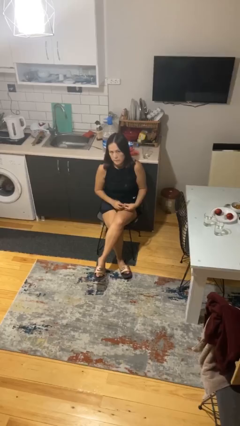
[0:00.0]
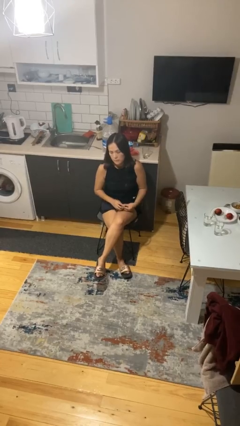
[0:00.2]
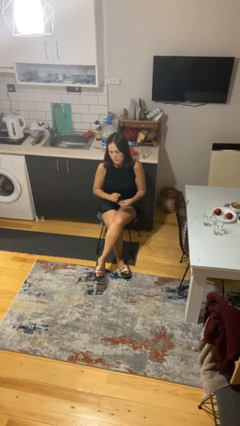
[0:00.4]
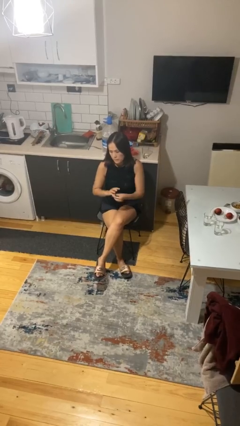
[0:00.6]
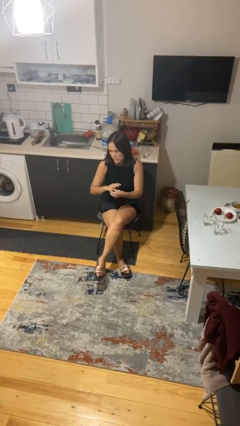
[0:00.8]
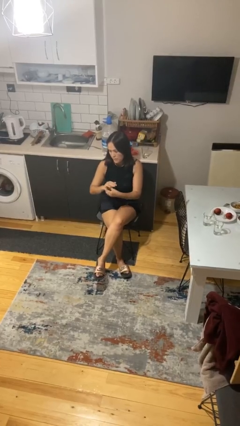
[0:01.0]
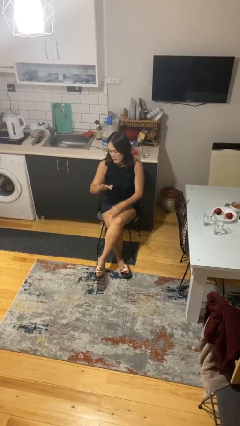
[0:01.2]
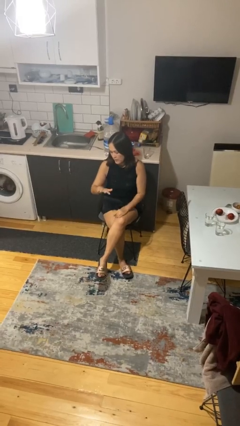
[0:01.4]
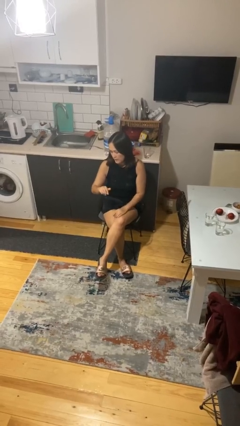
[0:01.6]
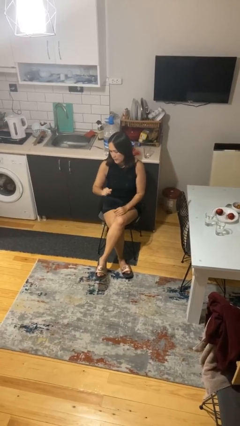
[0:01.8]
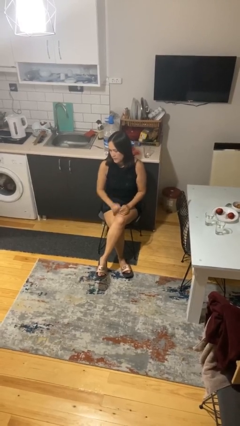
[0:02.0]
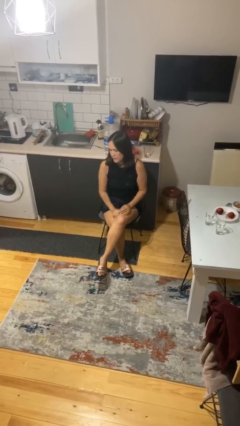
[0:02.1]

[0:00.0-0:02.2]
person puts on ring

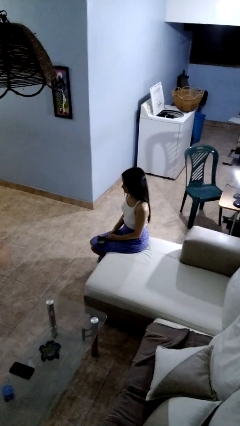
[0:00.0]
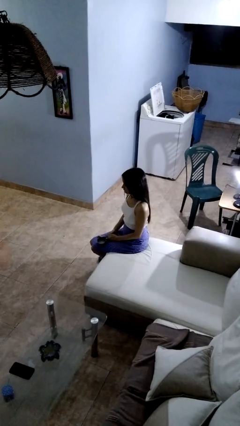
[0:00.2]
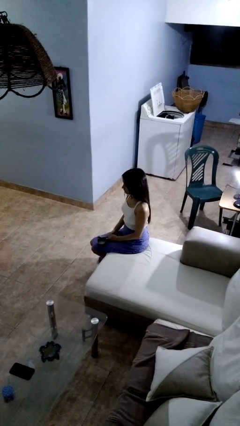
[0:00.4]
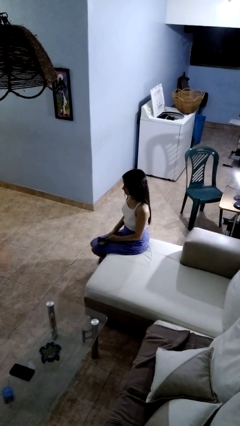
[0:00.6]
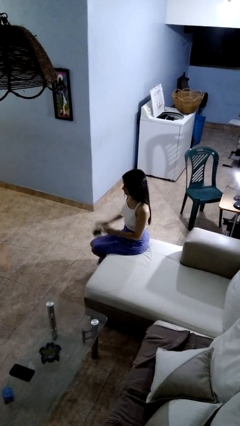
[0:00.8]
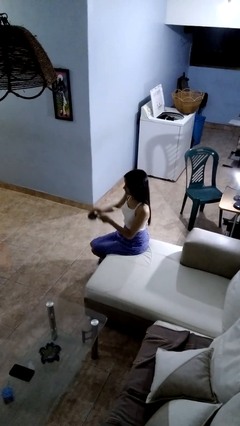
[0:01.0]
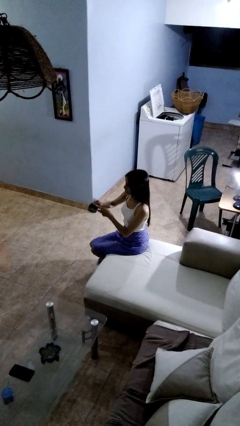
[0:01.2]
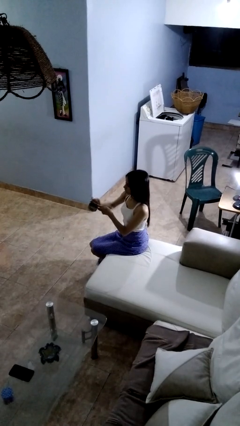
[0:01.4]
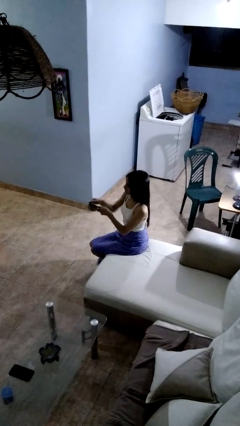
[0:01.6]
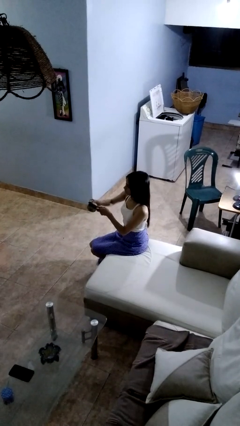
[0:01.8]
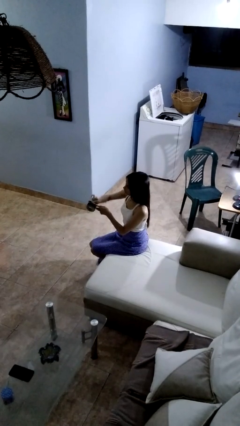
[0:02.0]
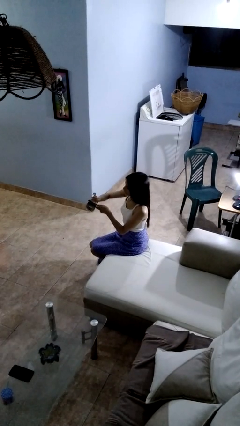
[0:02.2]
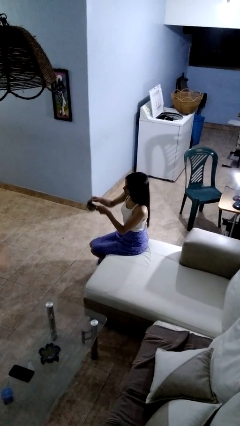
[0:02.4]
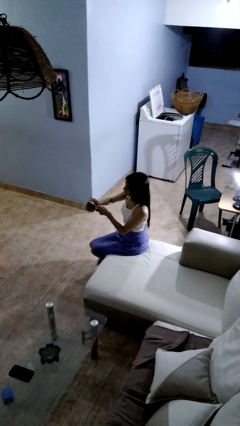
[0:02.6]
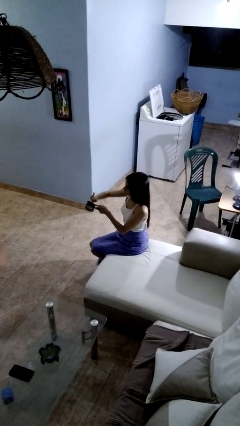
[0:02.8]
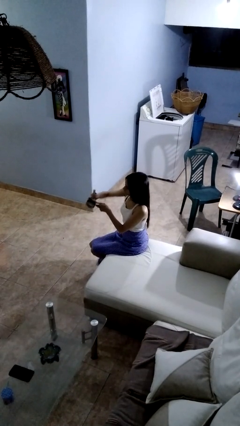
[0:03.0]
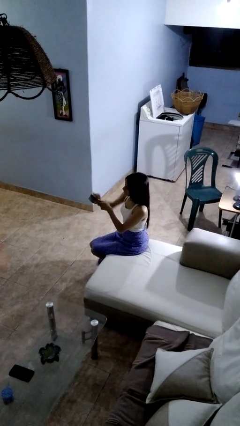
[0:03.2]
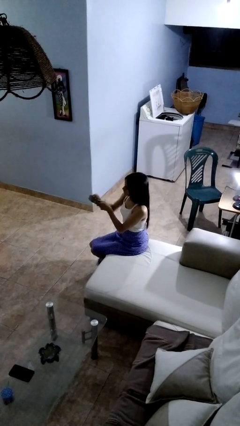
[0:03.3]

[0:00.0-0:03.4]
person opens can with can opener

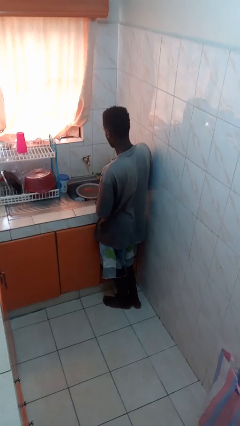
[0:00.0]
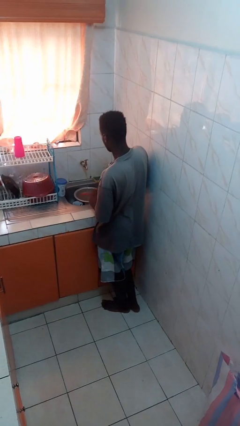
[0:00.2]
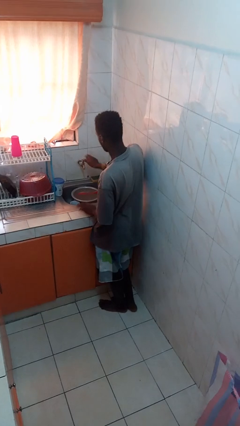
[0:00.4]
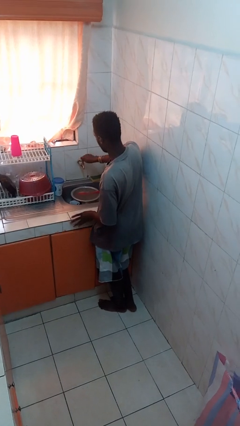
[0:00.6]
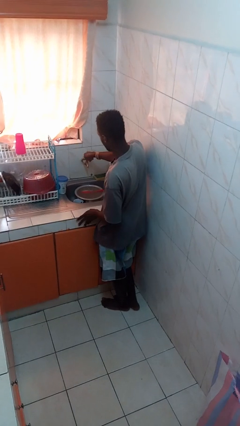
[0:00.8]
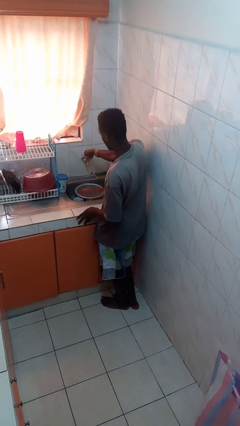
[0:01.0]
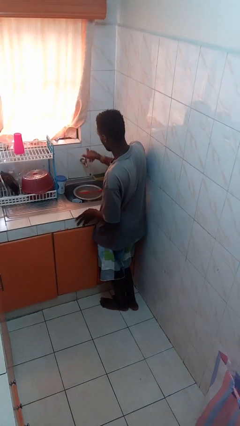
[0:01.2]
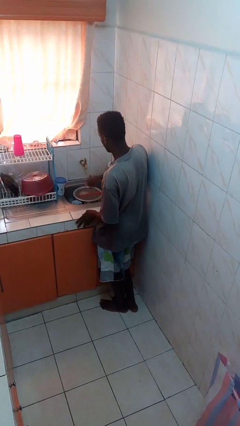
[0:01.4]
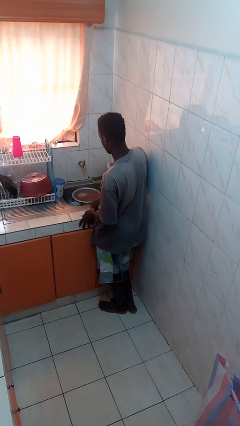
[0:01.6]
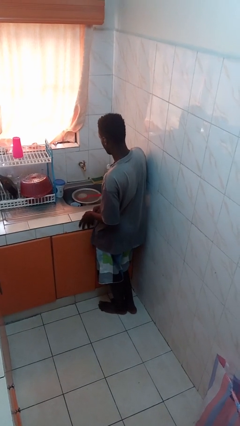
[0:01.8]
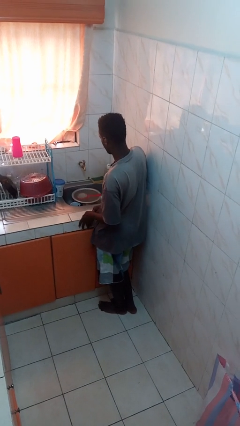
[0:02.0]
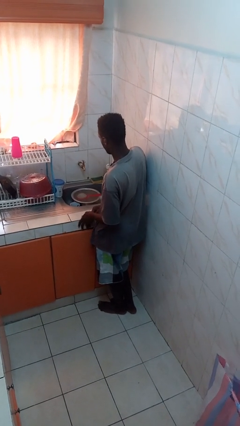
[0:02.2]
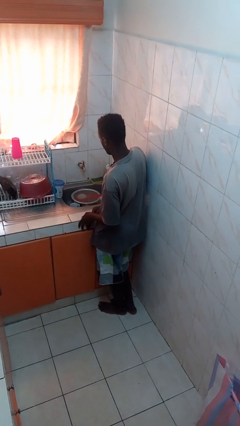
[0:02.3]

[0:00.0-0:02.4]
person turns off faucet

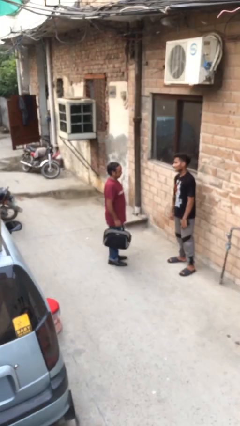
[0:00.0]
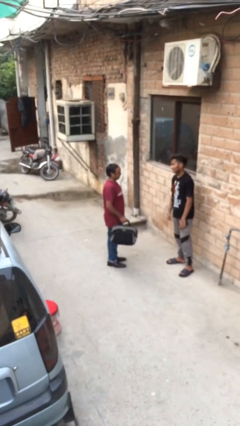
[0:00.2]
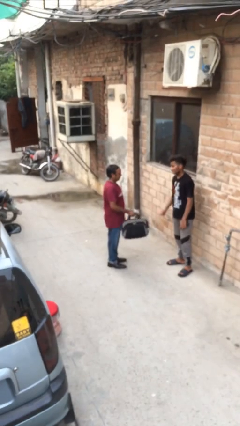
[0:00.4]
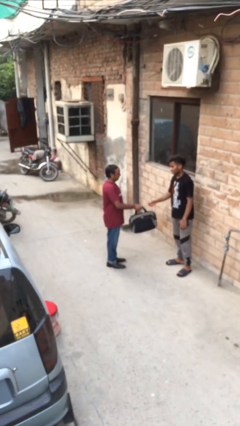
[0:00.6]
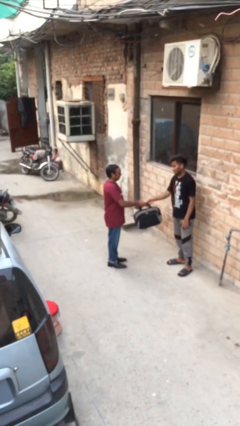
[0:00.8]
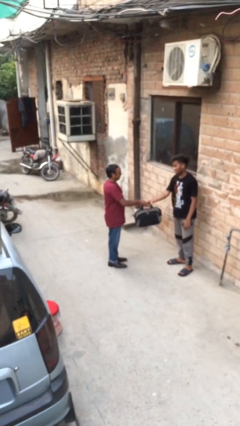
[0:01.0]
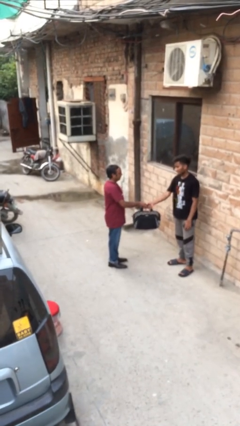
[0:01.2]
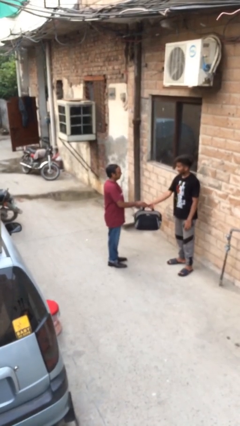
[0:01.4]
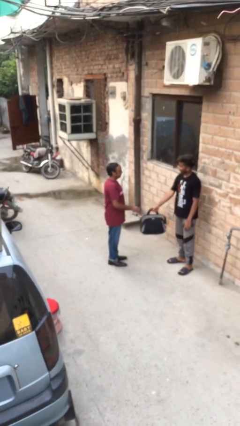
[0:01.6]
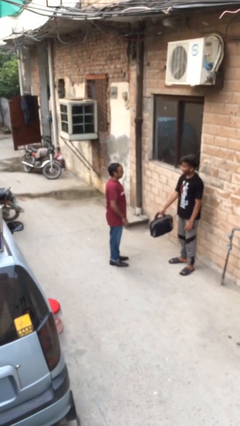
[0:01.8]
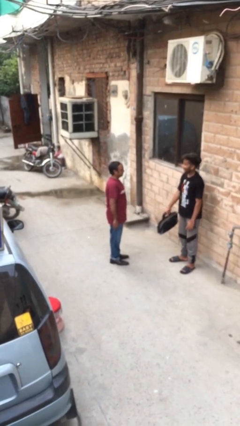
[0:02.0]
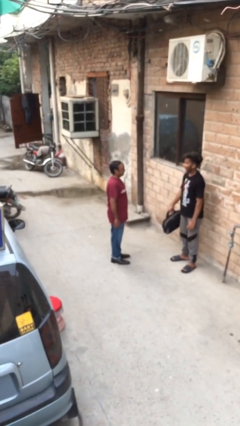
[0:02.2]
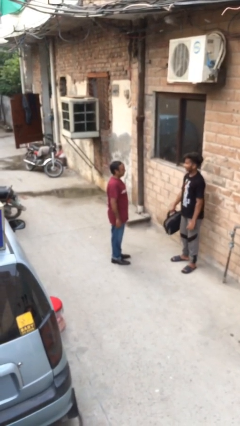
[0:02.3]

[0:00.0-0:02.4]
person transfers object to person

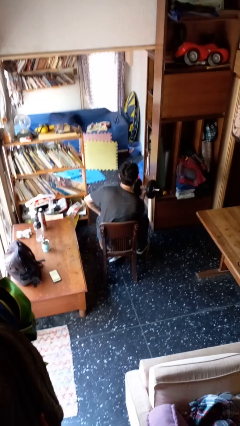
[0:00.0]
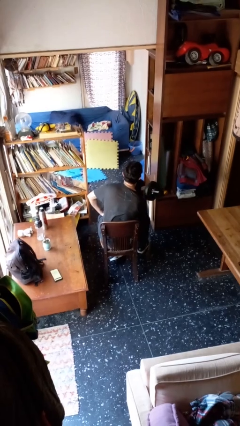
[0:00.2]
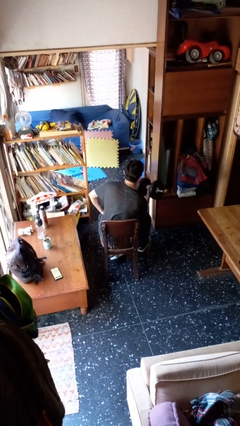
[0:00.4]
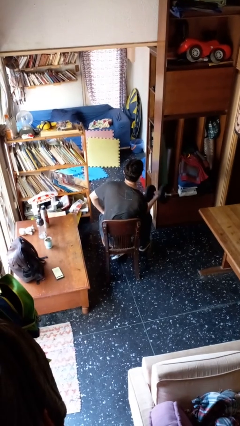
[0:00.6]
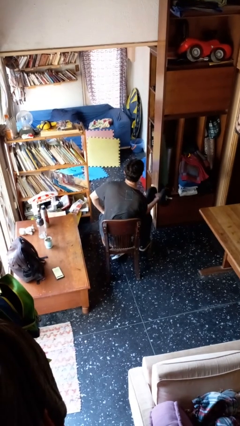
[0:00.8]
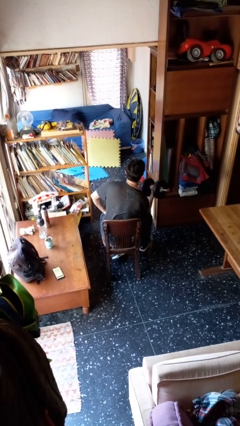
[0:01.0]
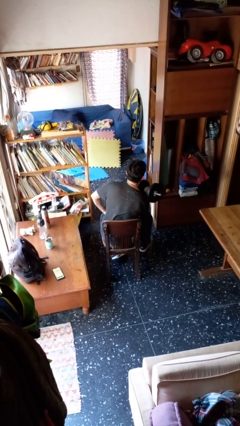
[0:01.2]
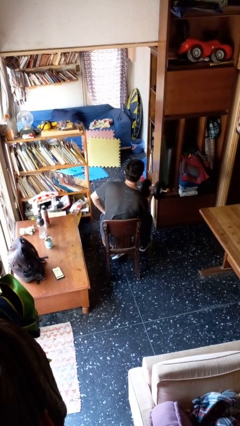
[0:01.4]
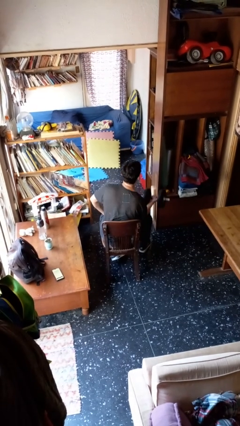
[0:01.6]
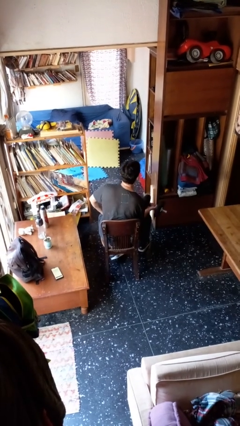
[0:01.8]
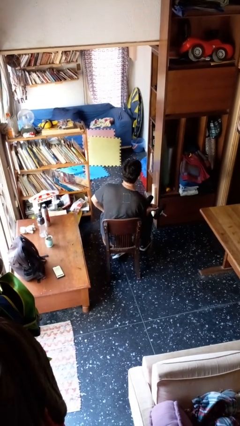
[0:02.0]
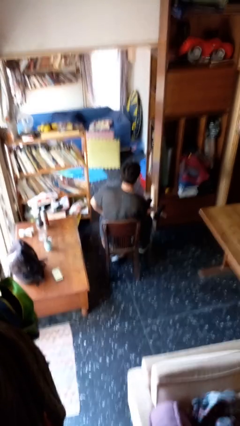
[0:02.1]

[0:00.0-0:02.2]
person lifts dumbbells

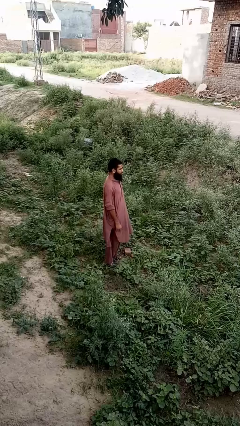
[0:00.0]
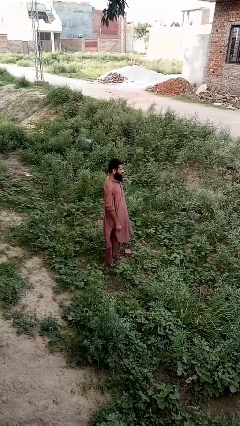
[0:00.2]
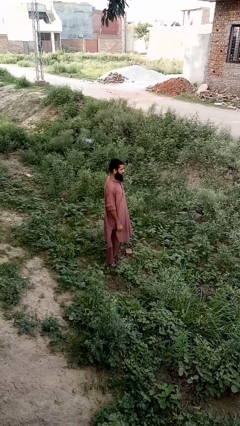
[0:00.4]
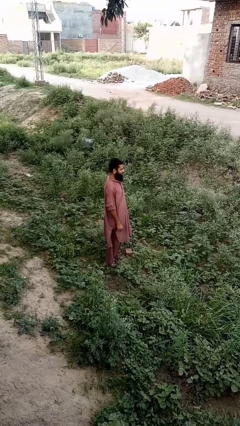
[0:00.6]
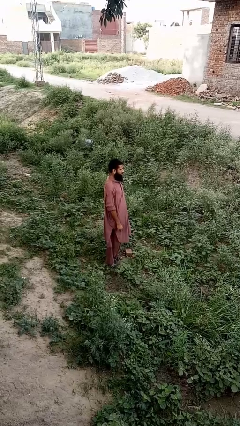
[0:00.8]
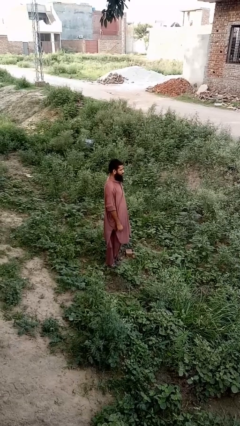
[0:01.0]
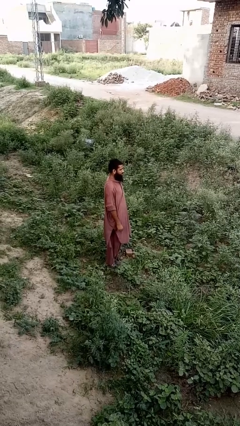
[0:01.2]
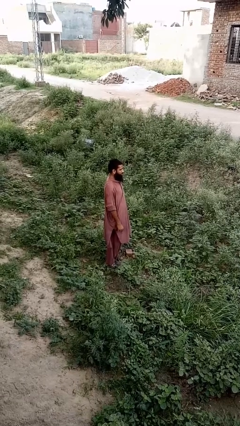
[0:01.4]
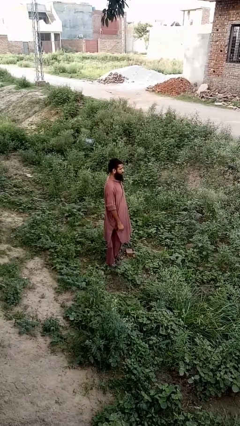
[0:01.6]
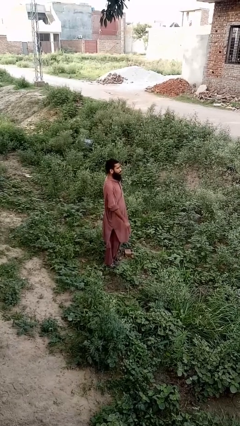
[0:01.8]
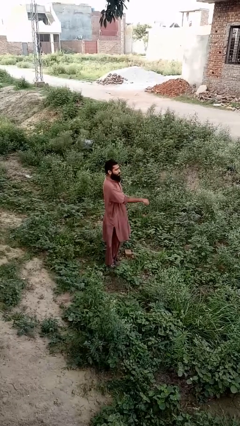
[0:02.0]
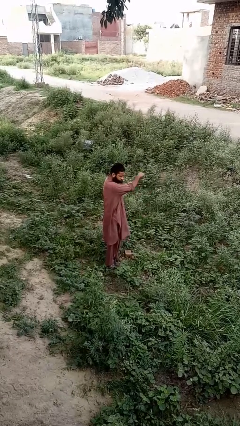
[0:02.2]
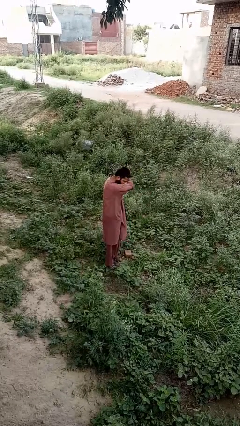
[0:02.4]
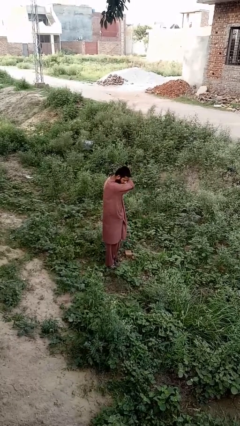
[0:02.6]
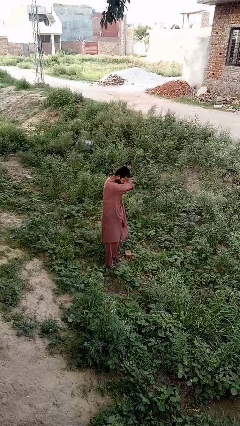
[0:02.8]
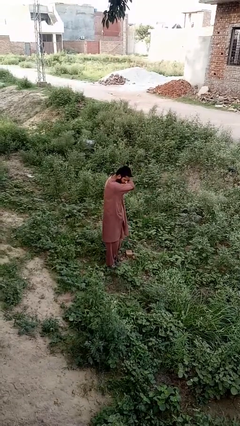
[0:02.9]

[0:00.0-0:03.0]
person sneezes into arm

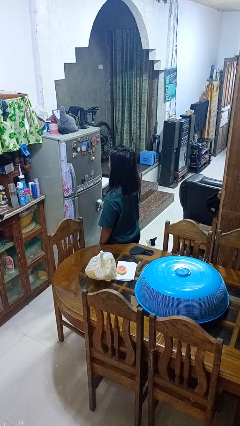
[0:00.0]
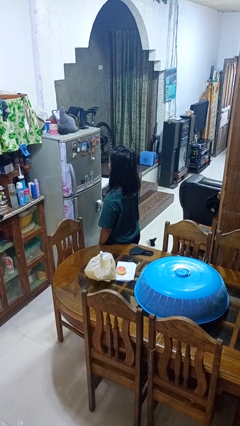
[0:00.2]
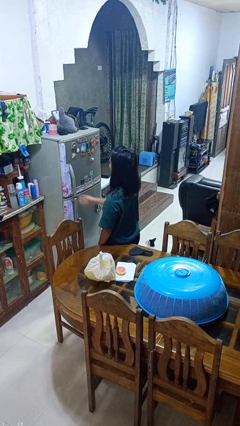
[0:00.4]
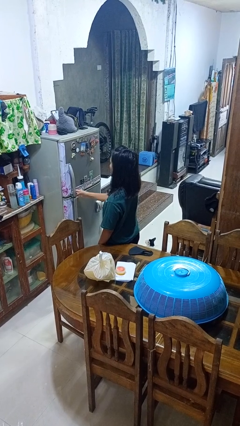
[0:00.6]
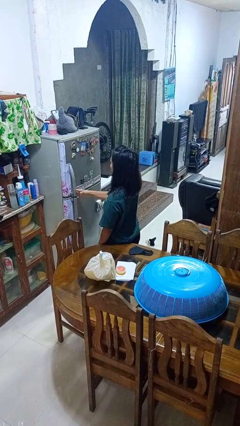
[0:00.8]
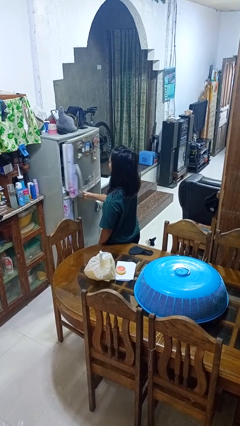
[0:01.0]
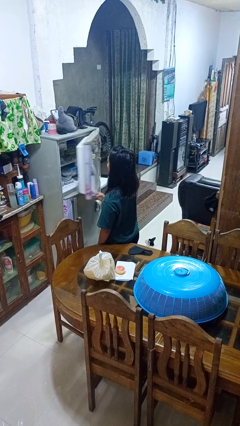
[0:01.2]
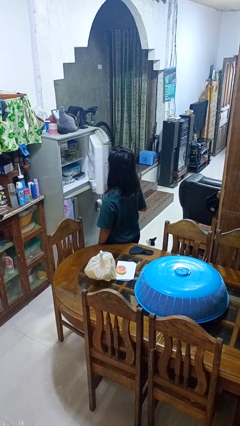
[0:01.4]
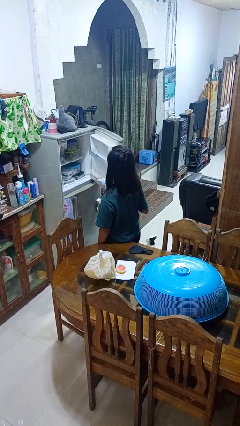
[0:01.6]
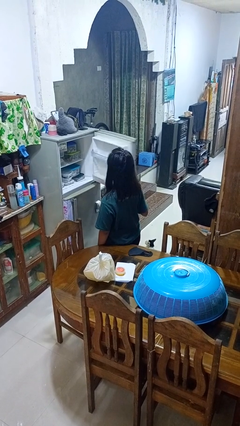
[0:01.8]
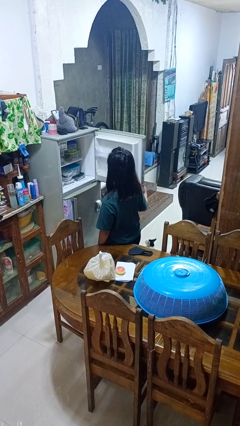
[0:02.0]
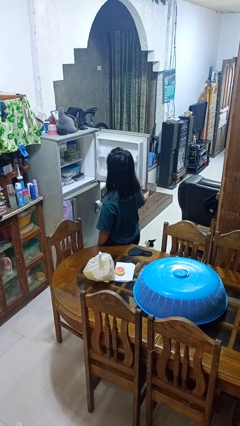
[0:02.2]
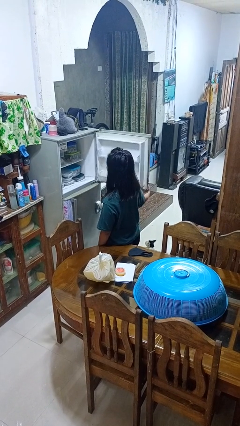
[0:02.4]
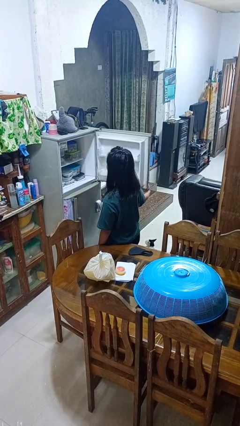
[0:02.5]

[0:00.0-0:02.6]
person opens refrigerator
